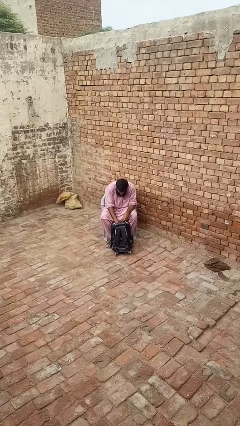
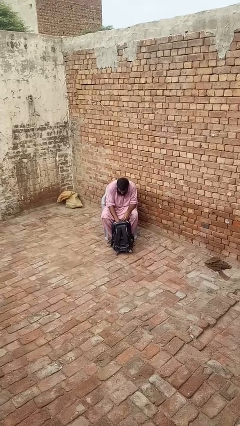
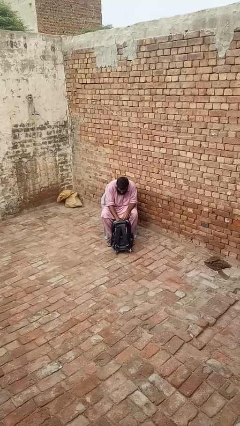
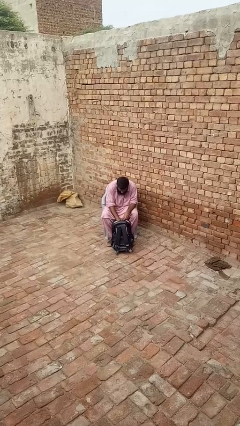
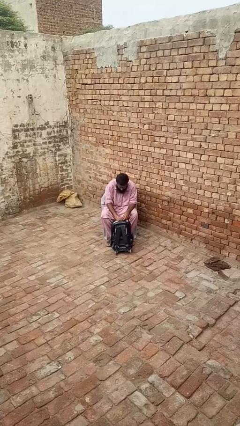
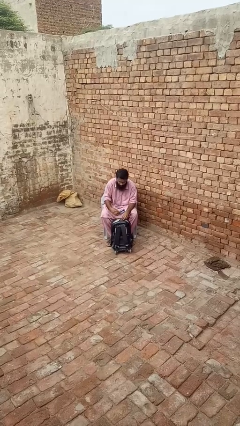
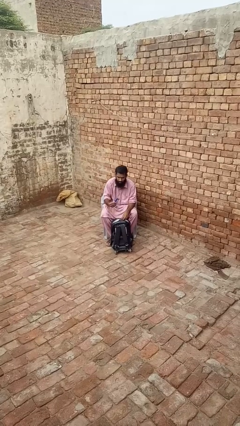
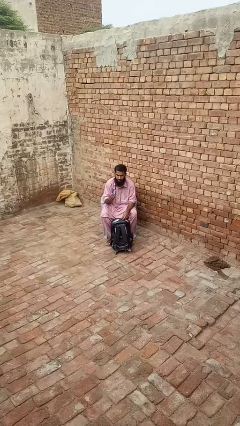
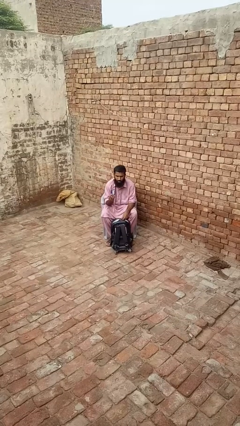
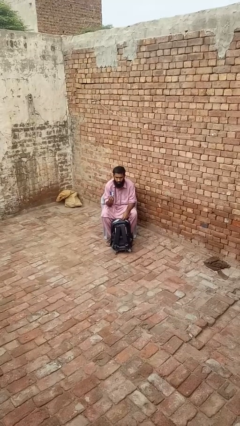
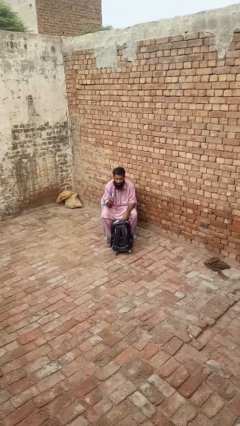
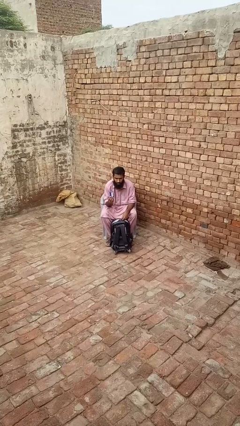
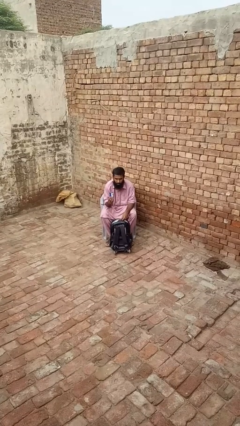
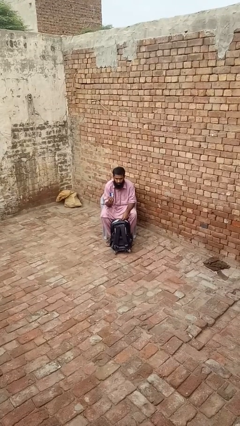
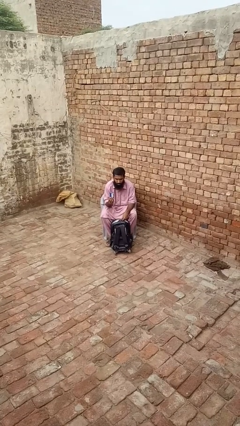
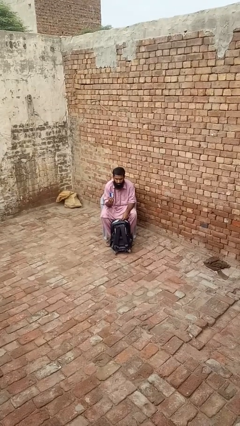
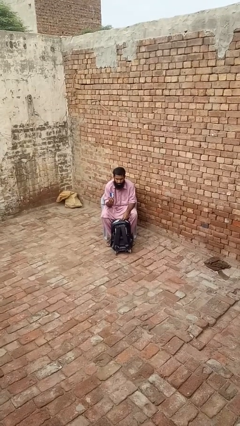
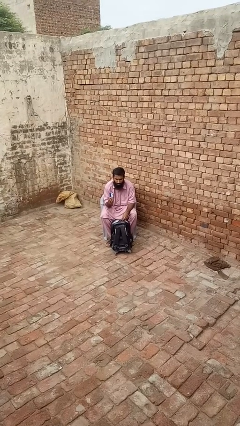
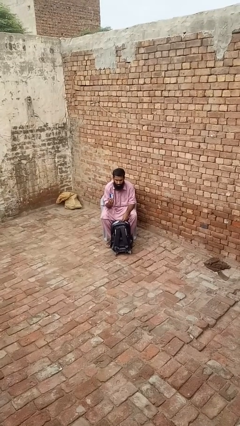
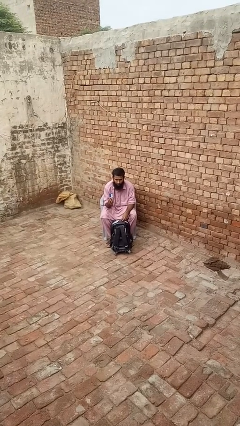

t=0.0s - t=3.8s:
person takes object from backpack

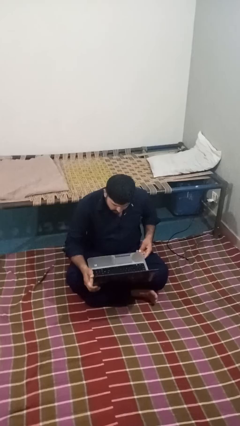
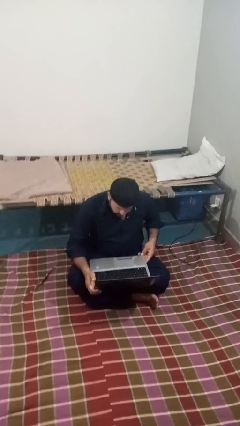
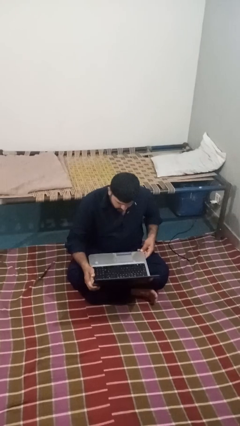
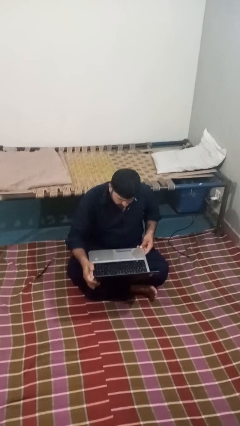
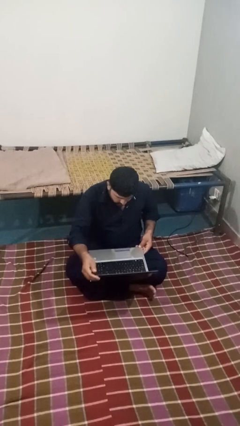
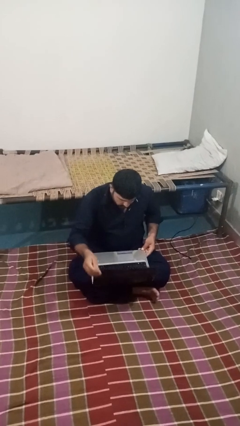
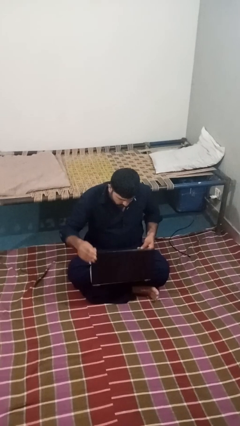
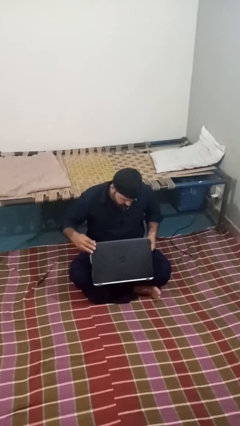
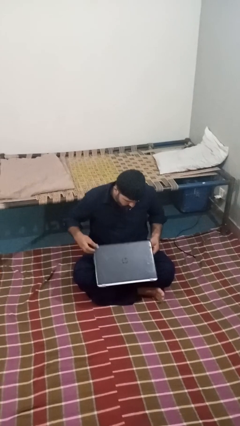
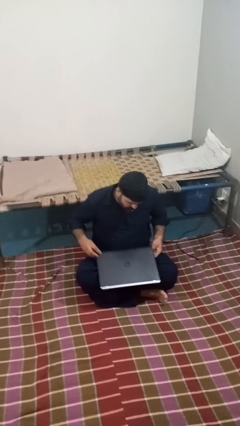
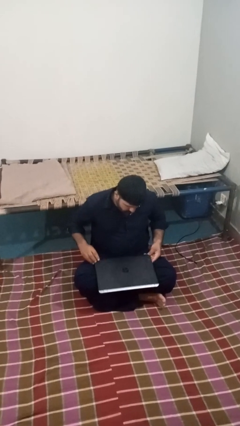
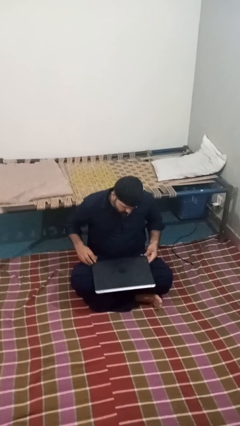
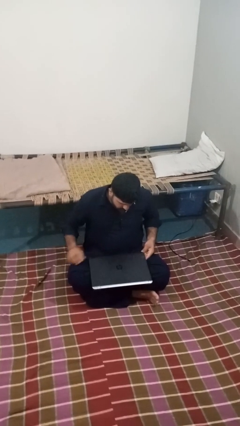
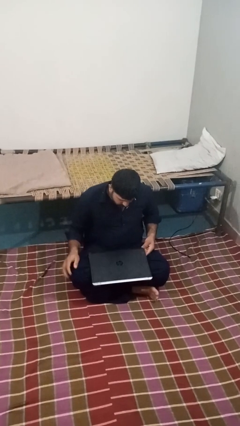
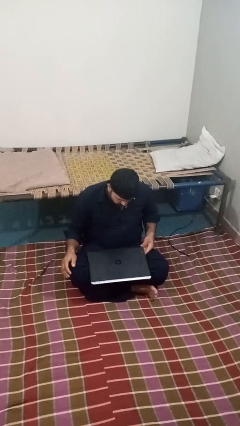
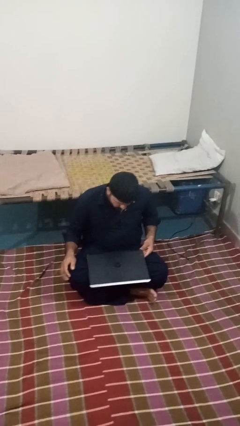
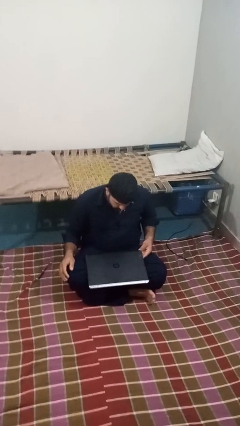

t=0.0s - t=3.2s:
person closes laptop

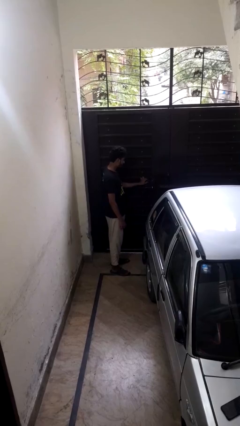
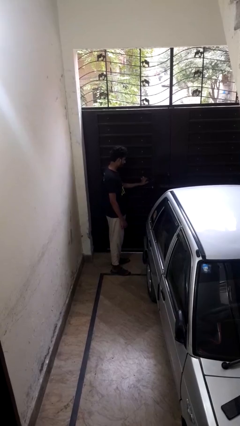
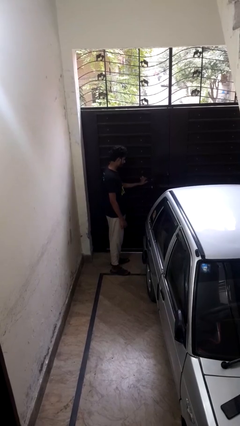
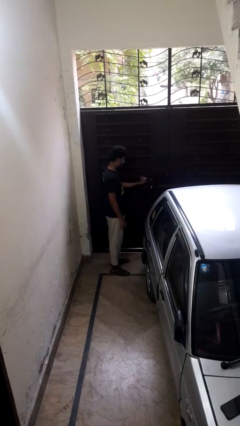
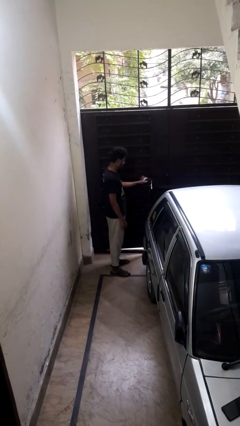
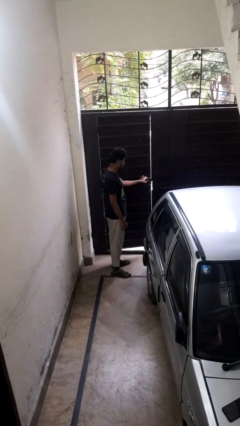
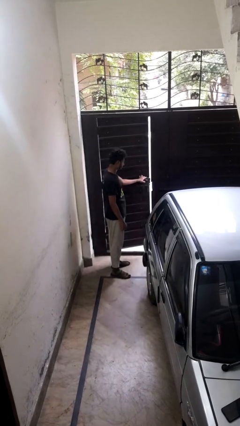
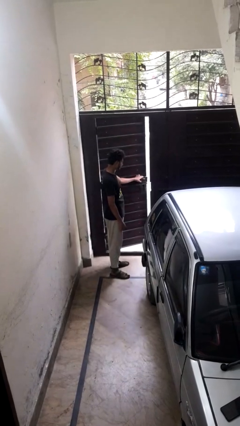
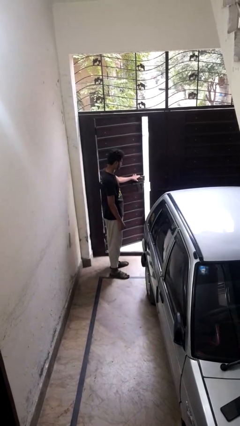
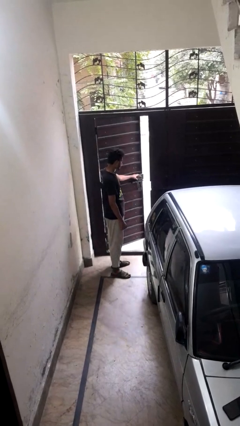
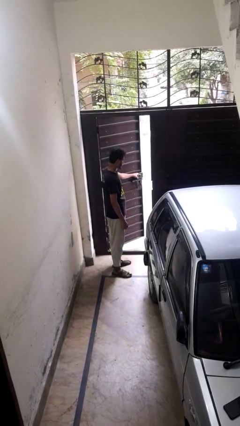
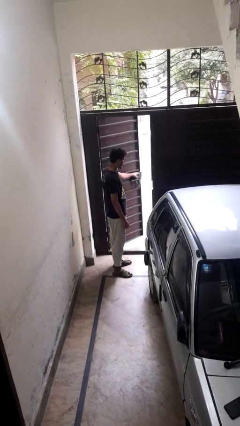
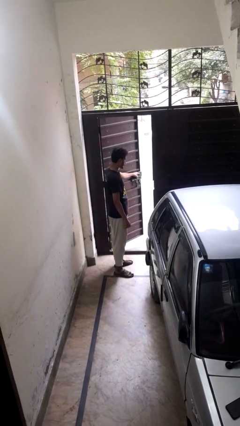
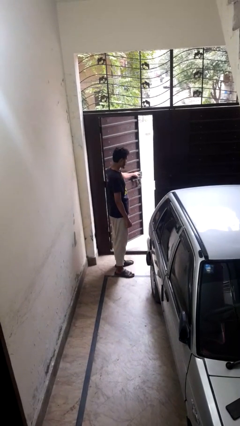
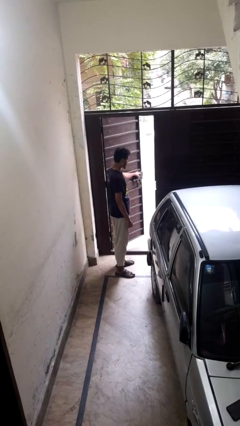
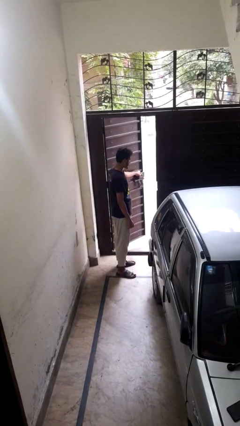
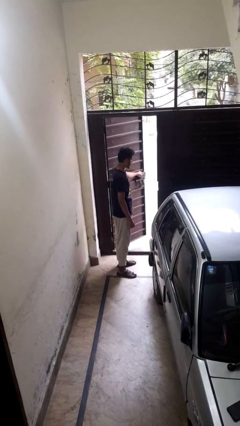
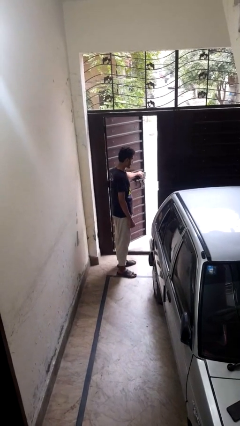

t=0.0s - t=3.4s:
person opens gate

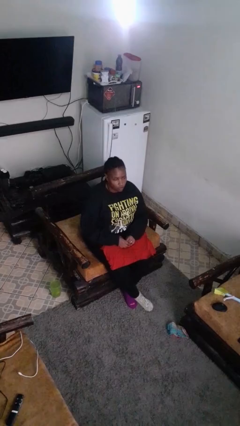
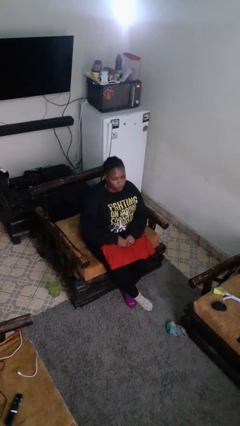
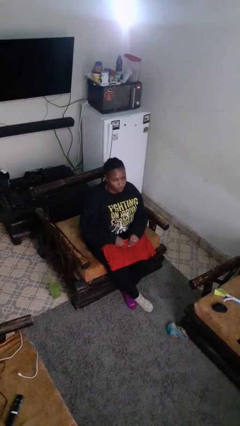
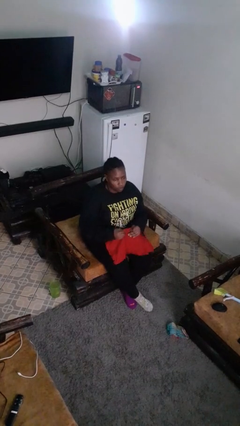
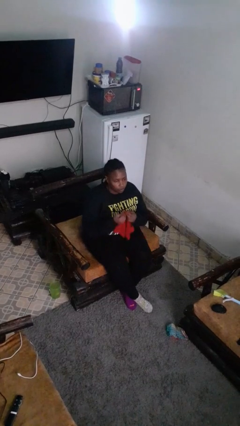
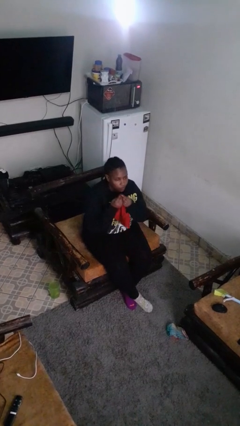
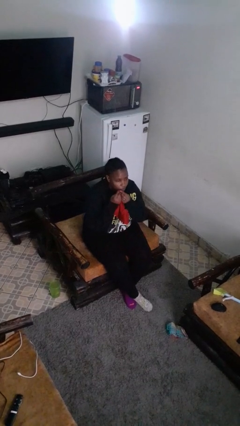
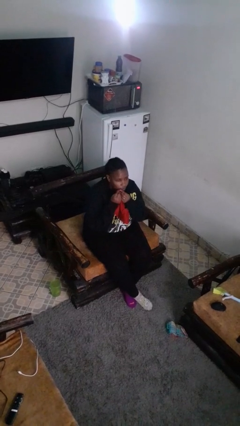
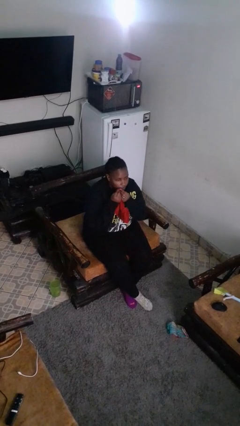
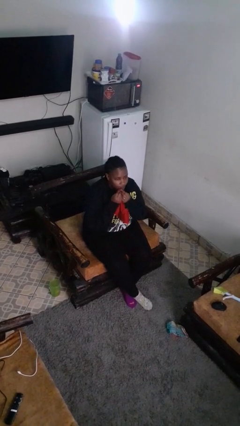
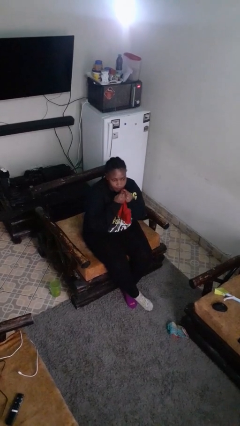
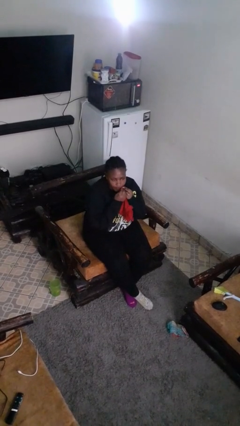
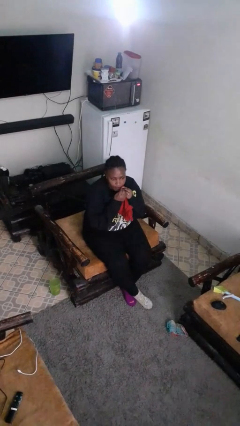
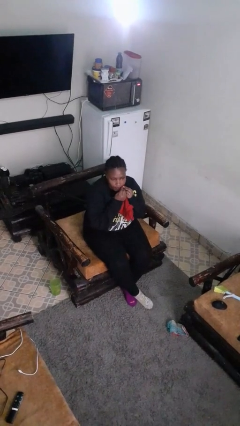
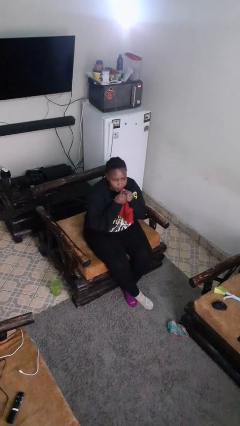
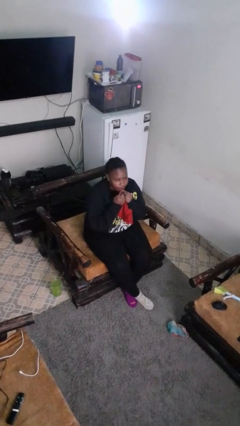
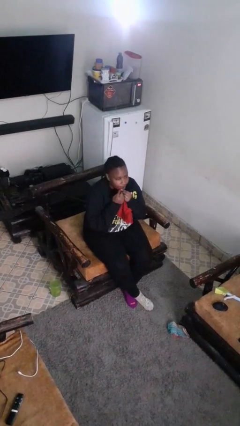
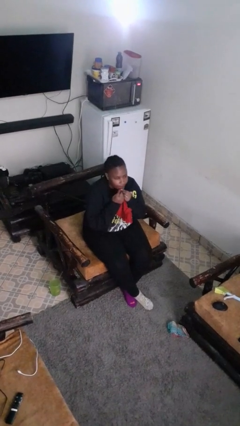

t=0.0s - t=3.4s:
person wipes mouth with napkin

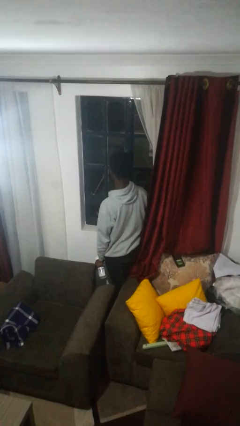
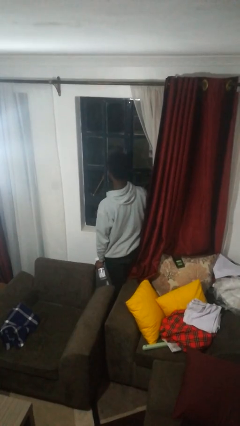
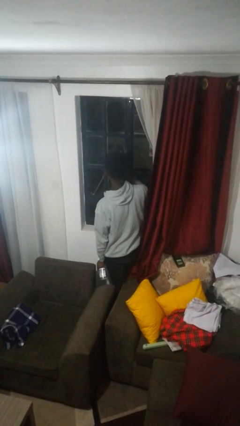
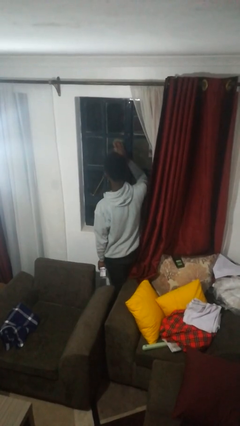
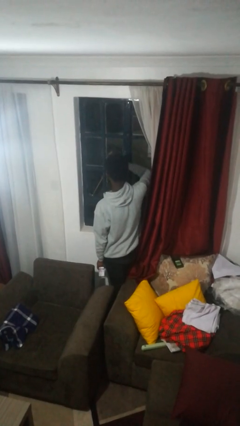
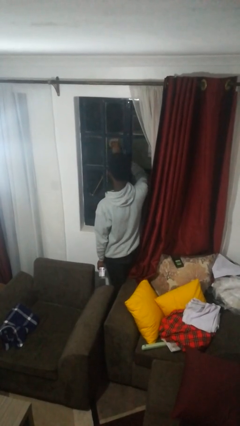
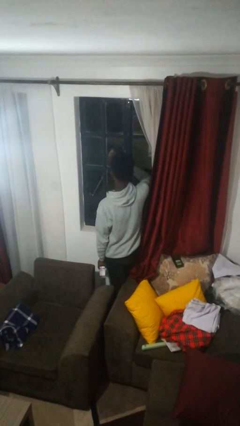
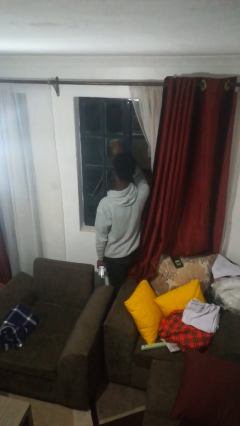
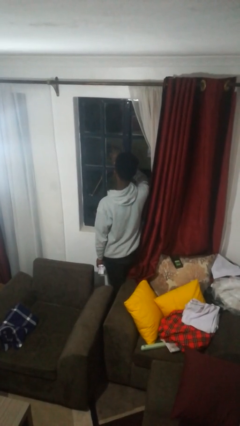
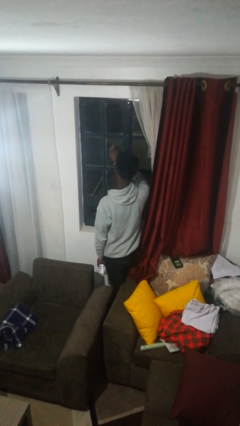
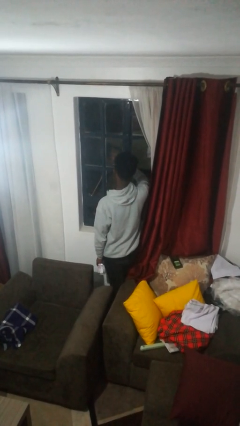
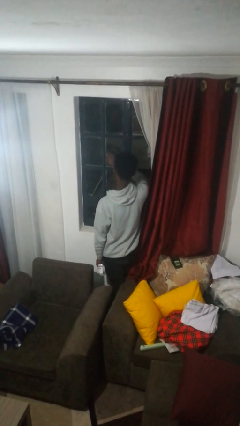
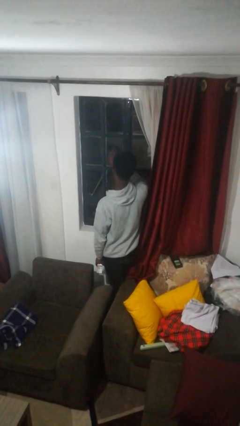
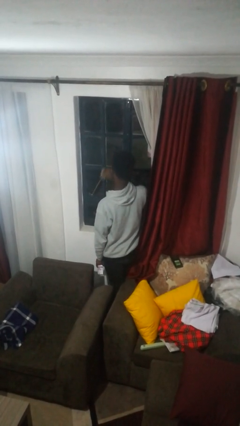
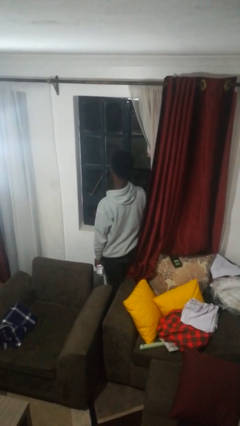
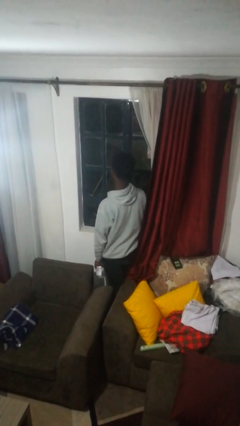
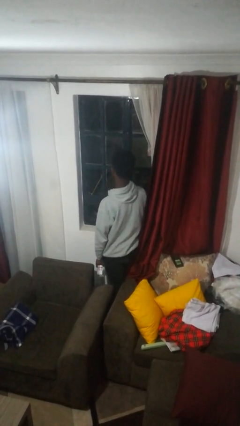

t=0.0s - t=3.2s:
person washes window

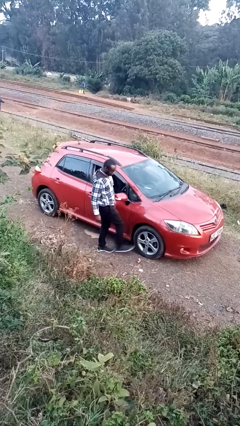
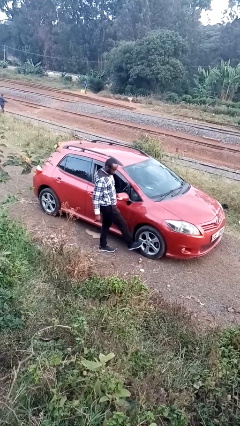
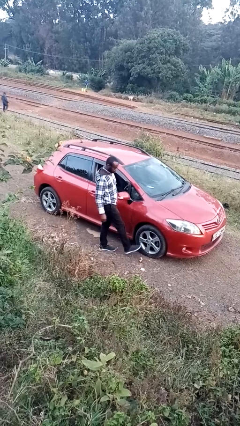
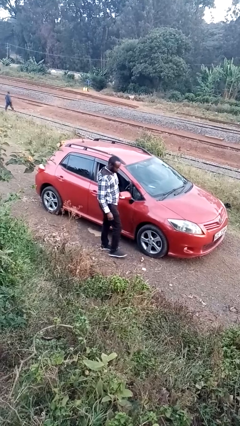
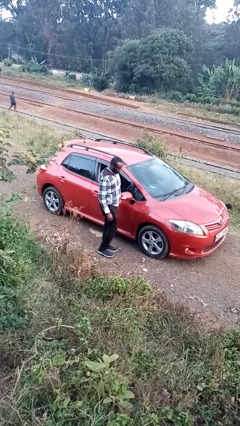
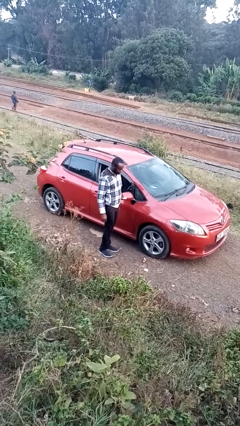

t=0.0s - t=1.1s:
person kicks car tires
